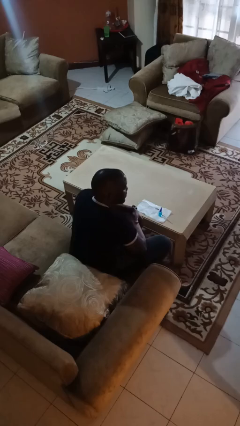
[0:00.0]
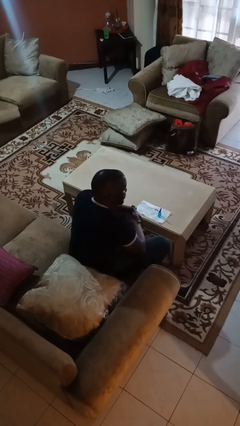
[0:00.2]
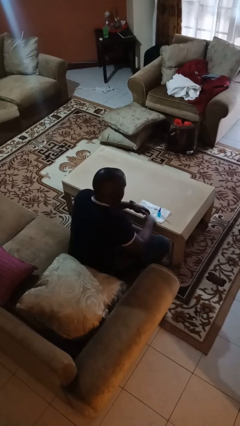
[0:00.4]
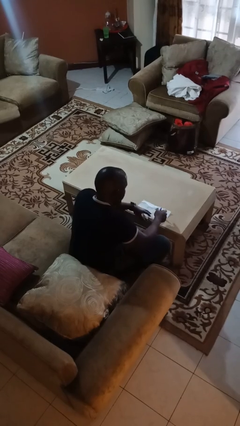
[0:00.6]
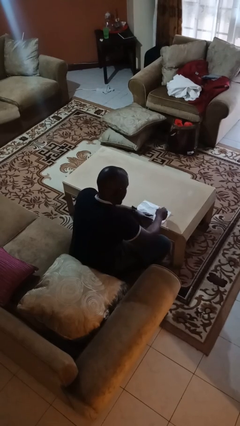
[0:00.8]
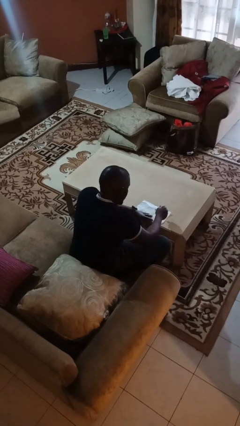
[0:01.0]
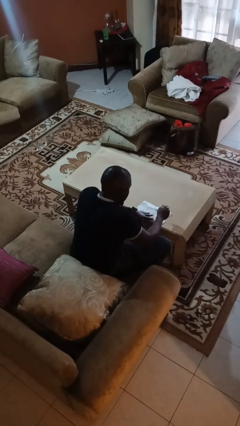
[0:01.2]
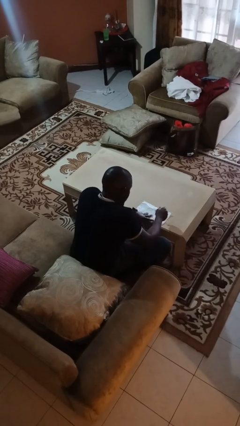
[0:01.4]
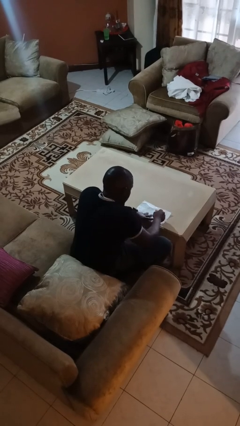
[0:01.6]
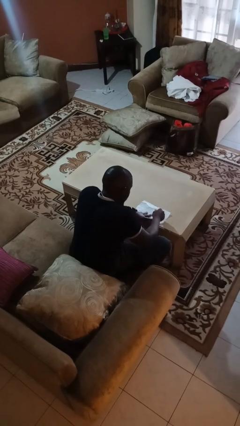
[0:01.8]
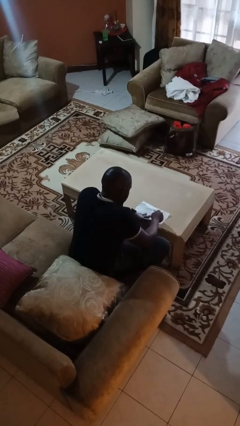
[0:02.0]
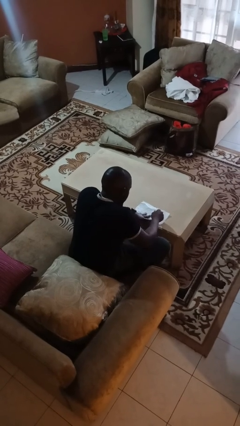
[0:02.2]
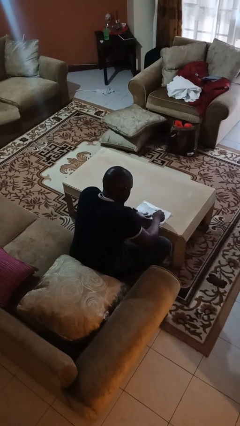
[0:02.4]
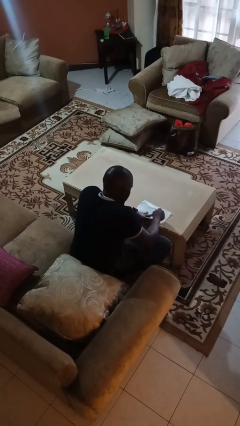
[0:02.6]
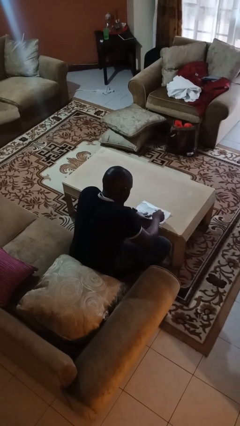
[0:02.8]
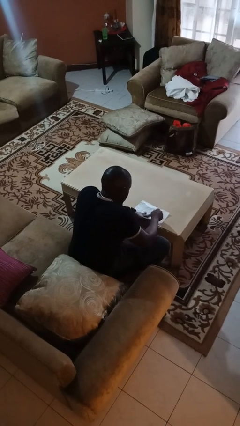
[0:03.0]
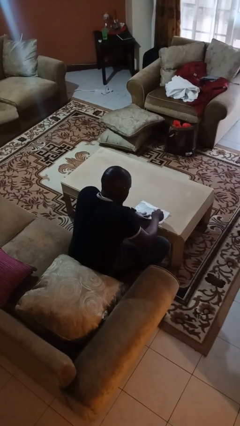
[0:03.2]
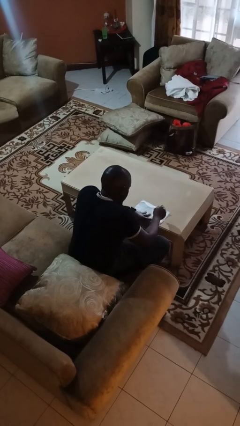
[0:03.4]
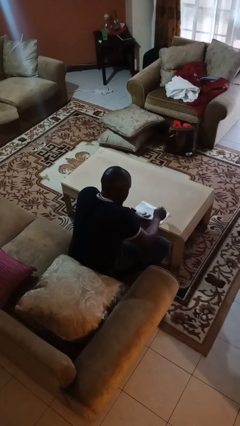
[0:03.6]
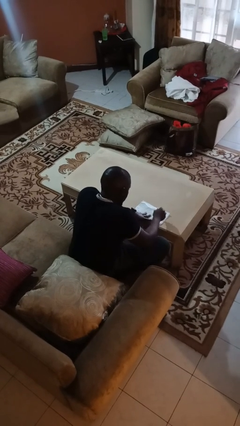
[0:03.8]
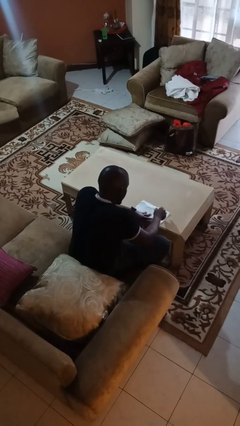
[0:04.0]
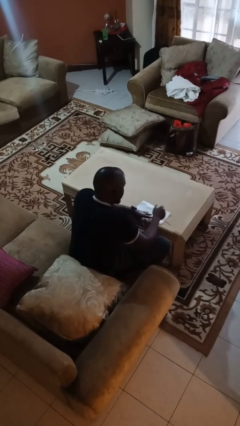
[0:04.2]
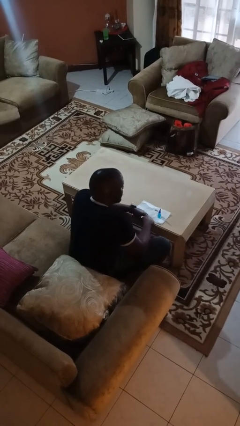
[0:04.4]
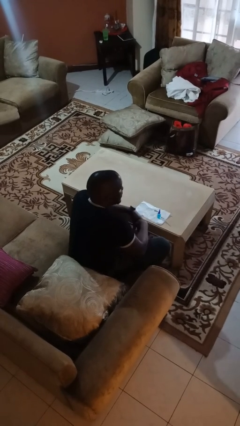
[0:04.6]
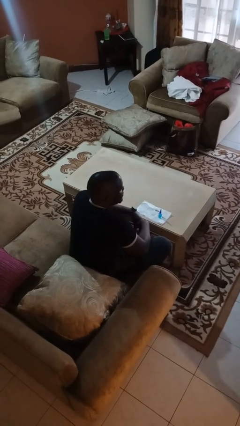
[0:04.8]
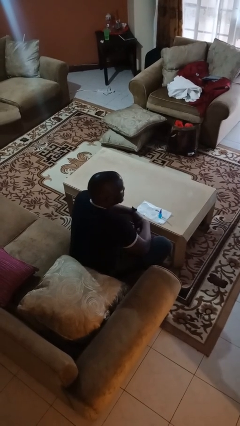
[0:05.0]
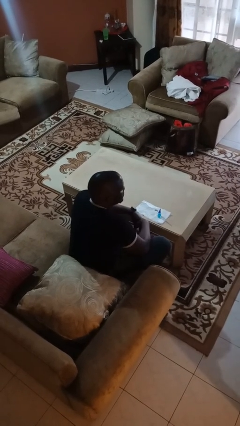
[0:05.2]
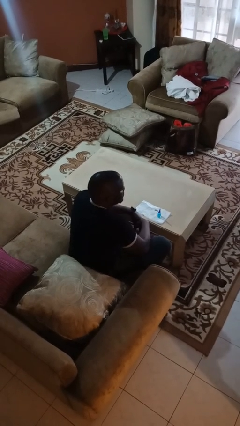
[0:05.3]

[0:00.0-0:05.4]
person paints fingernails

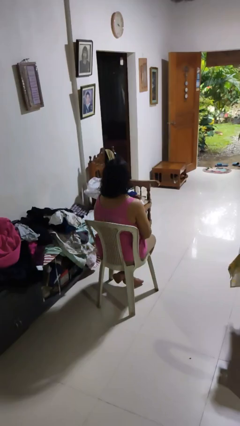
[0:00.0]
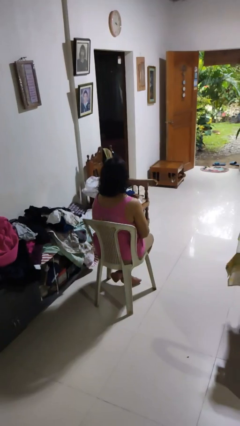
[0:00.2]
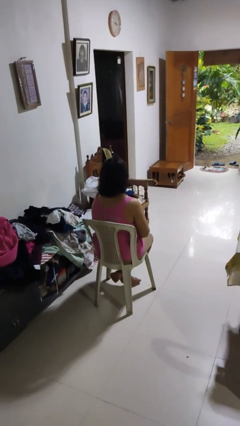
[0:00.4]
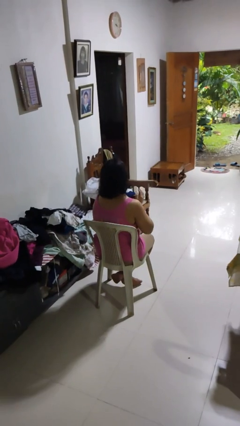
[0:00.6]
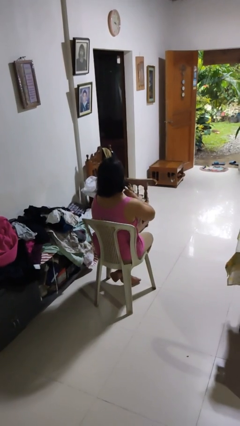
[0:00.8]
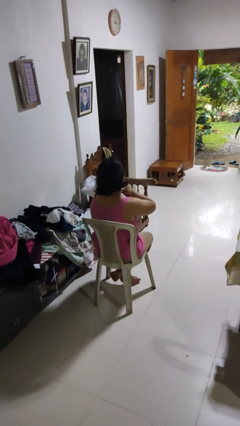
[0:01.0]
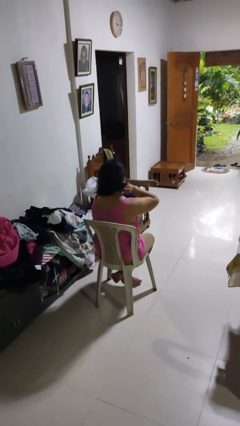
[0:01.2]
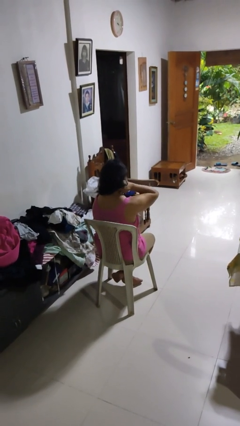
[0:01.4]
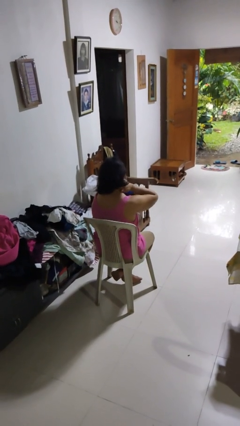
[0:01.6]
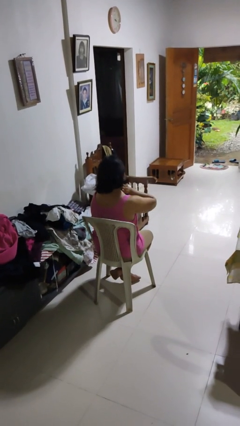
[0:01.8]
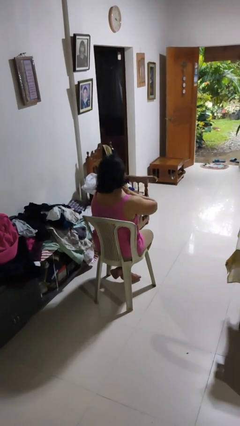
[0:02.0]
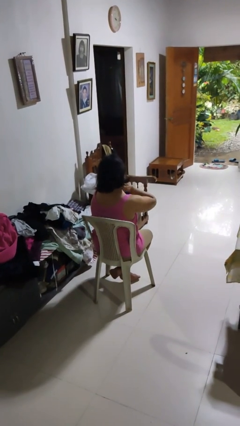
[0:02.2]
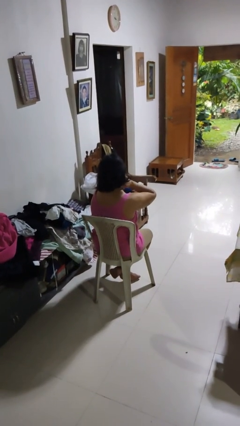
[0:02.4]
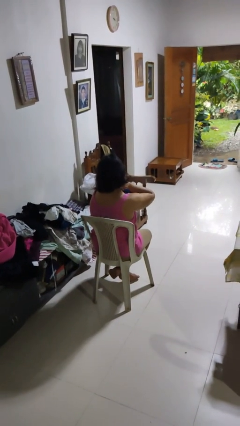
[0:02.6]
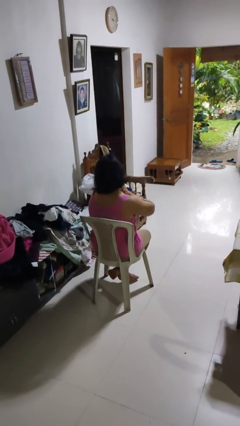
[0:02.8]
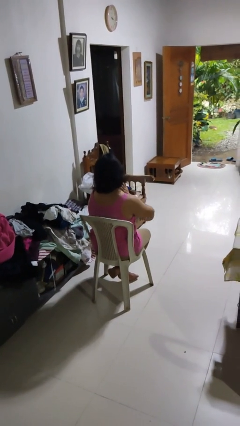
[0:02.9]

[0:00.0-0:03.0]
person rubs neck

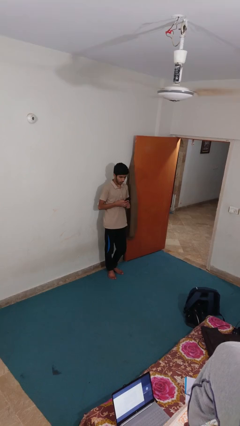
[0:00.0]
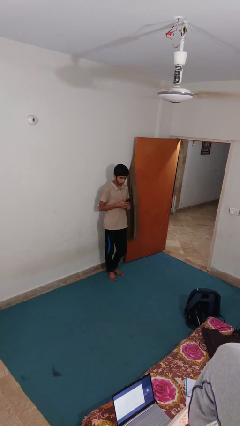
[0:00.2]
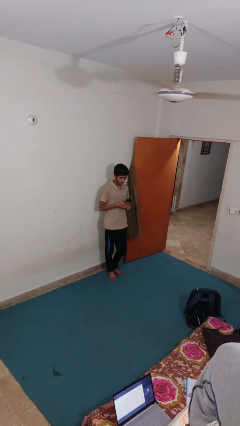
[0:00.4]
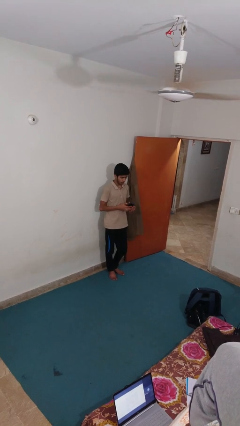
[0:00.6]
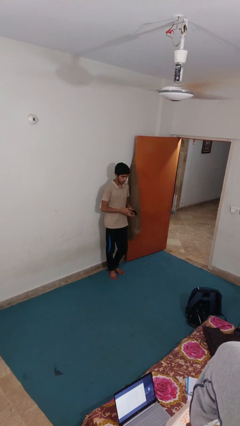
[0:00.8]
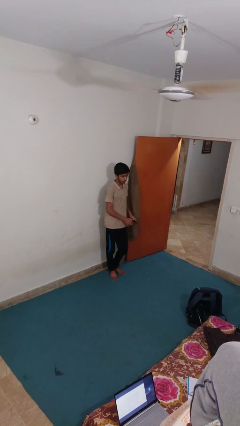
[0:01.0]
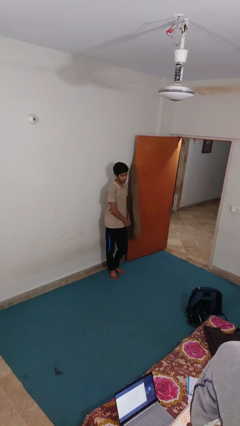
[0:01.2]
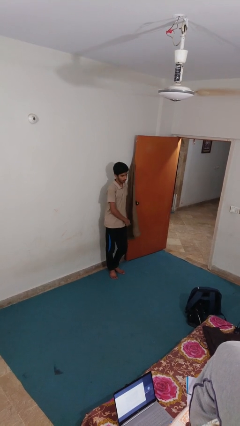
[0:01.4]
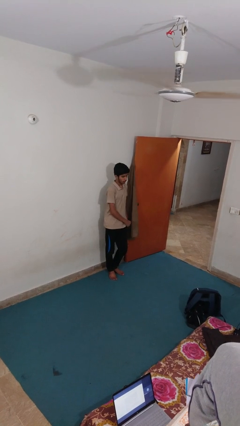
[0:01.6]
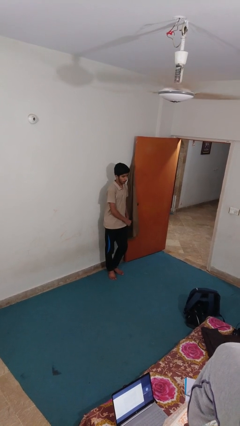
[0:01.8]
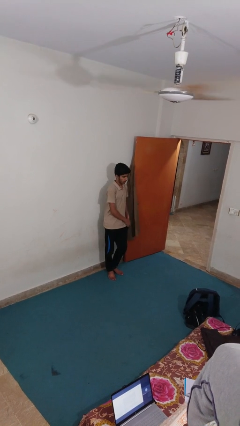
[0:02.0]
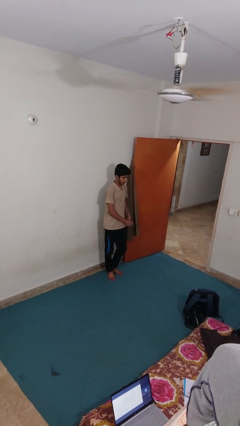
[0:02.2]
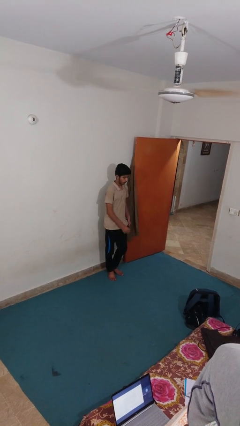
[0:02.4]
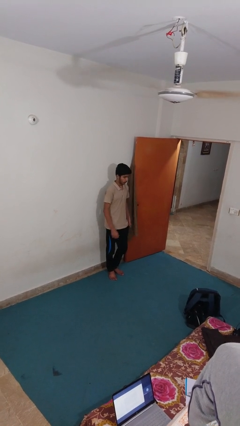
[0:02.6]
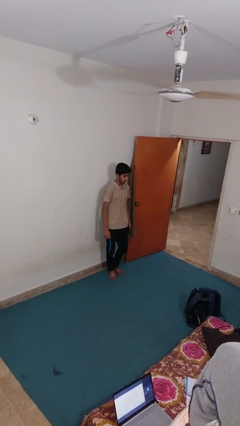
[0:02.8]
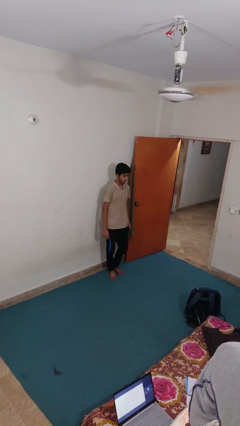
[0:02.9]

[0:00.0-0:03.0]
person puts phone into pocket

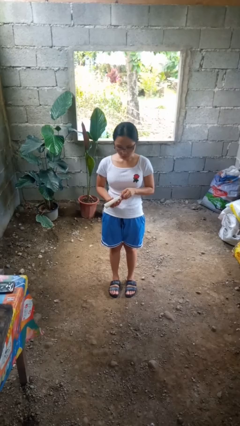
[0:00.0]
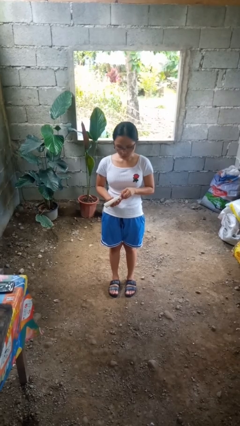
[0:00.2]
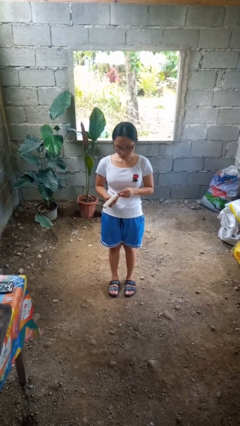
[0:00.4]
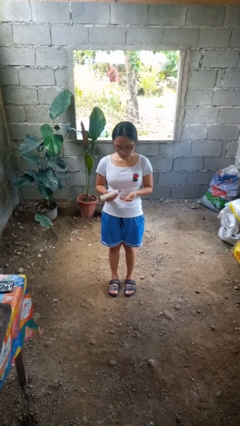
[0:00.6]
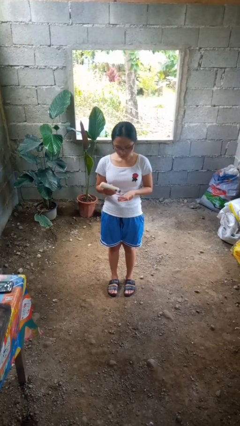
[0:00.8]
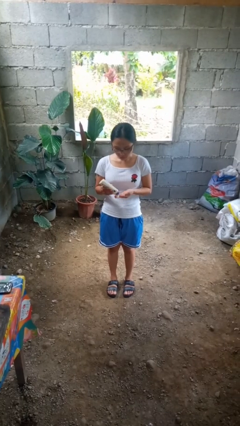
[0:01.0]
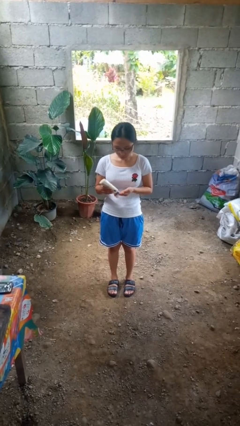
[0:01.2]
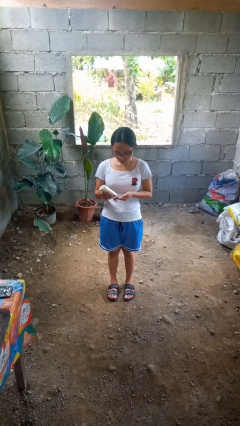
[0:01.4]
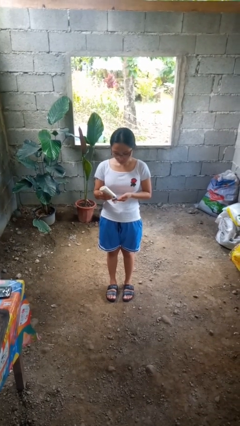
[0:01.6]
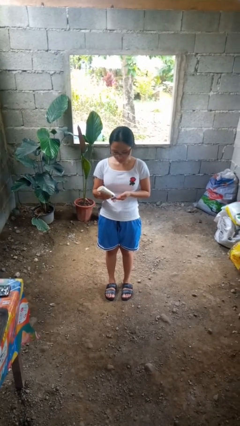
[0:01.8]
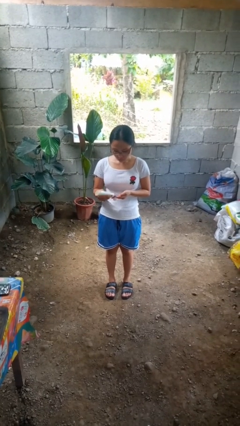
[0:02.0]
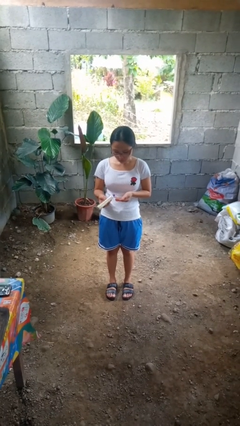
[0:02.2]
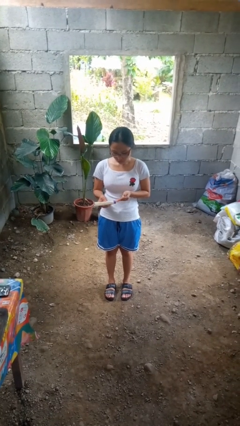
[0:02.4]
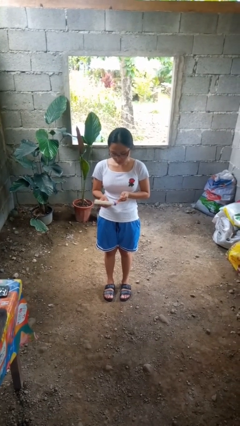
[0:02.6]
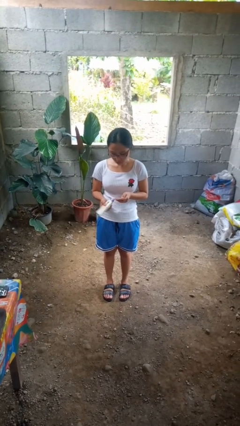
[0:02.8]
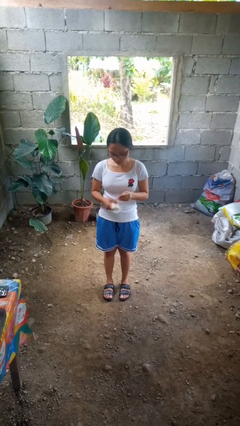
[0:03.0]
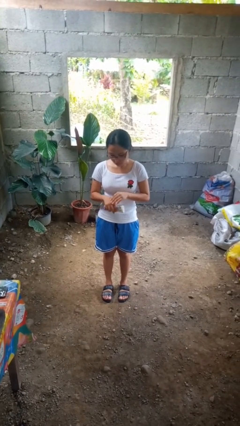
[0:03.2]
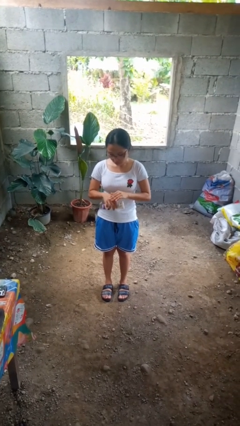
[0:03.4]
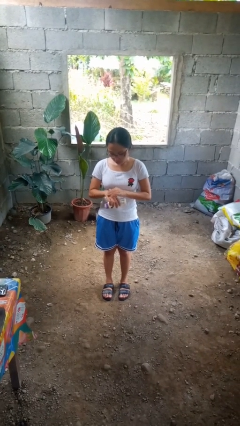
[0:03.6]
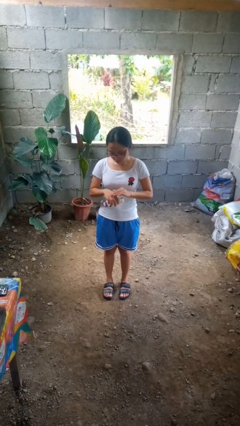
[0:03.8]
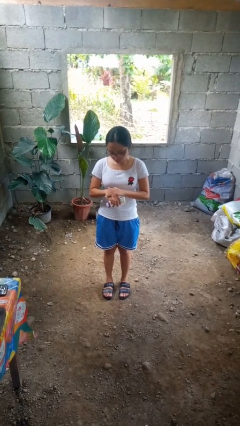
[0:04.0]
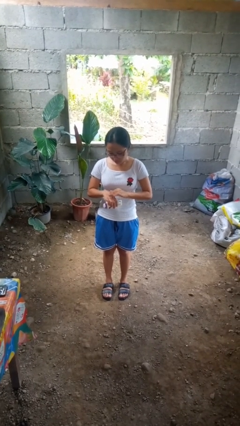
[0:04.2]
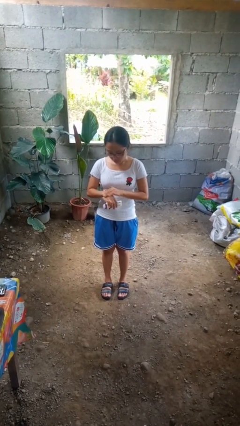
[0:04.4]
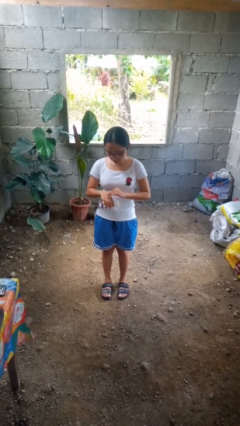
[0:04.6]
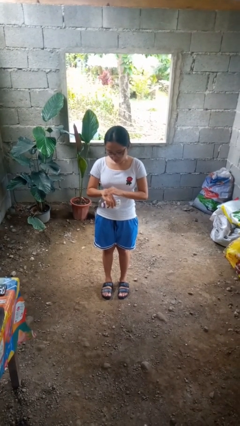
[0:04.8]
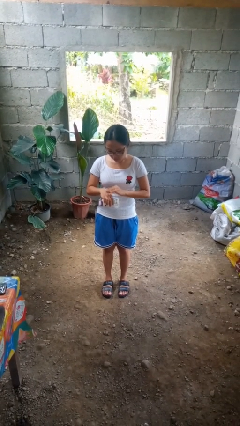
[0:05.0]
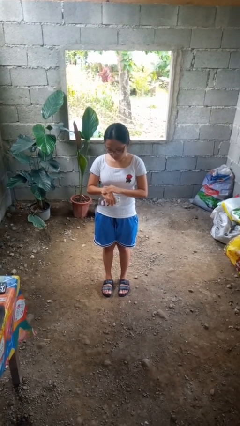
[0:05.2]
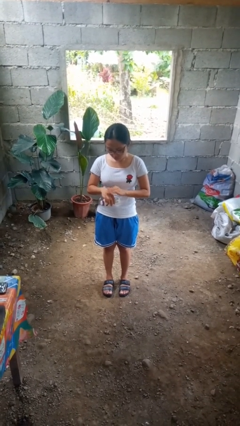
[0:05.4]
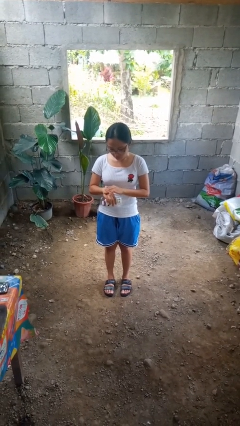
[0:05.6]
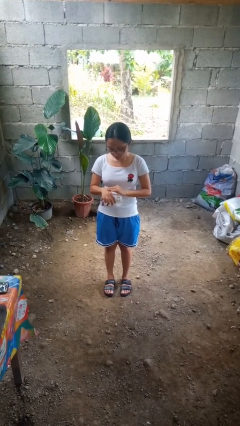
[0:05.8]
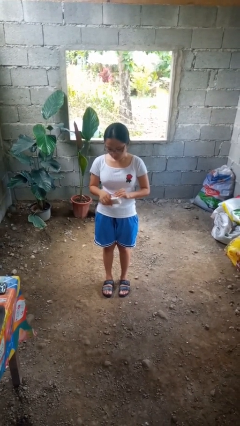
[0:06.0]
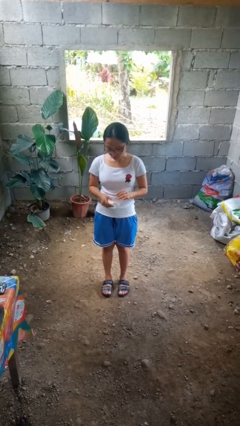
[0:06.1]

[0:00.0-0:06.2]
person applies sunscreen

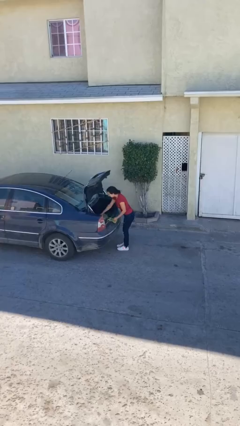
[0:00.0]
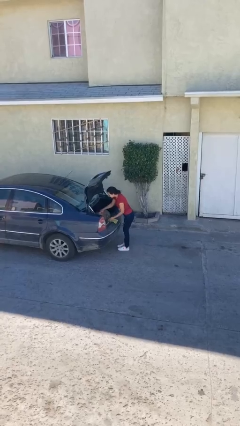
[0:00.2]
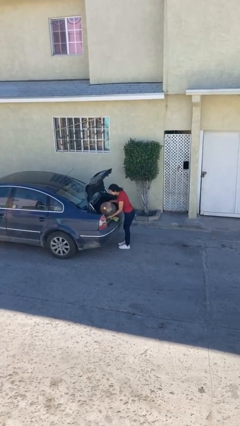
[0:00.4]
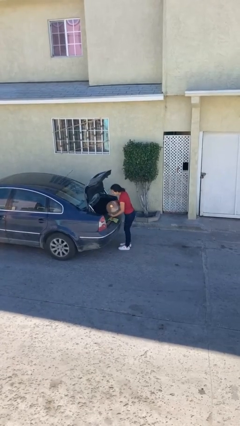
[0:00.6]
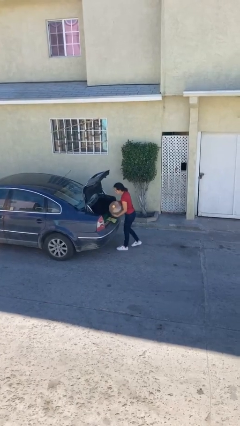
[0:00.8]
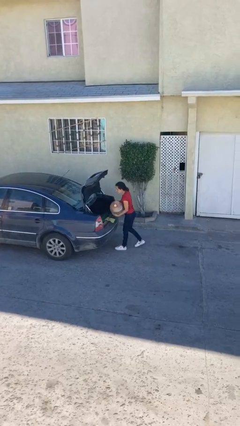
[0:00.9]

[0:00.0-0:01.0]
person unloads car
